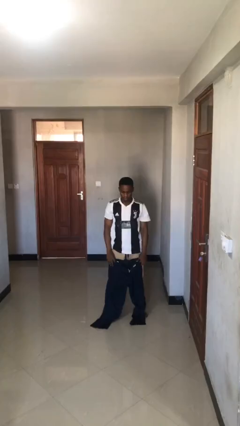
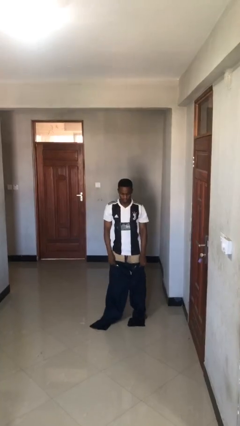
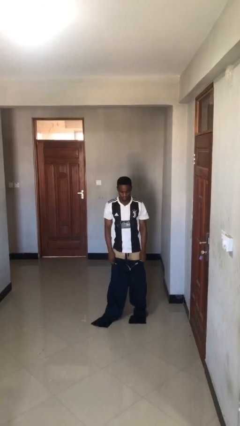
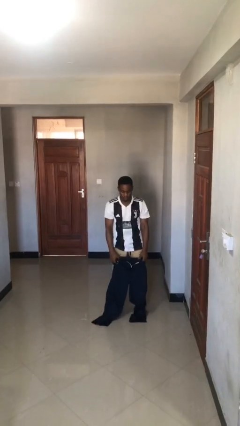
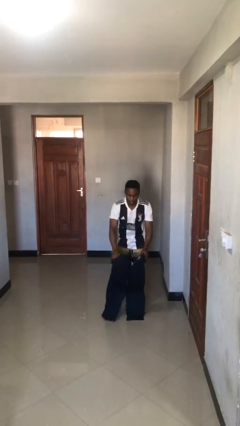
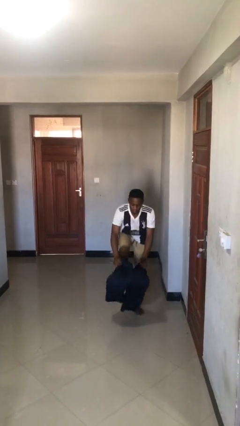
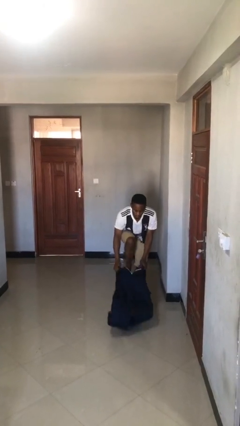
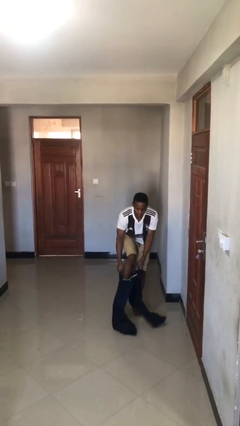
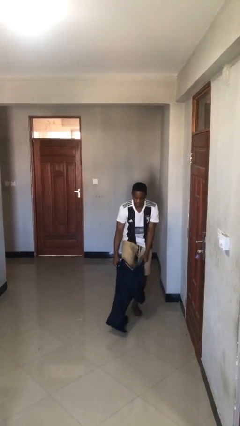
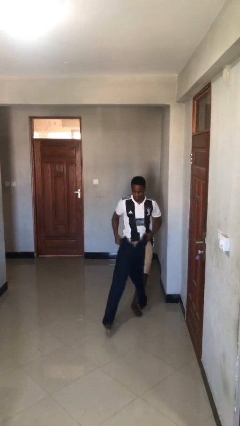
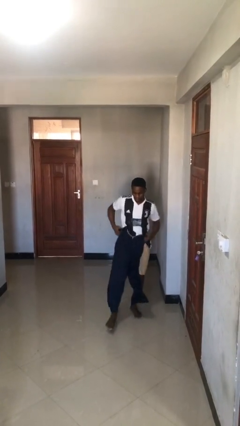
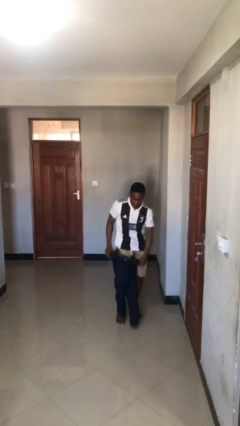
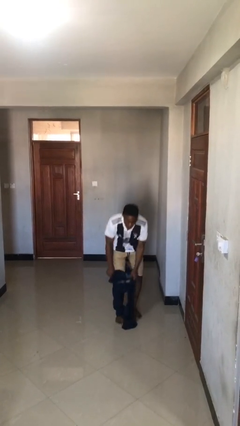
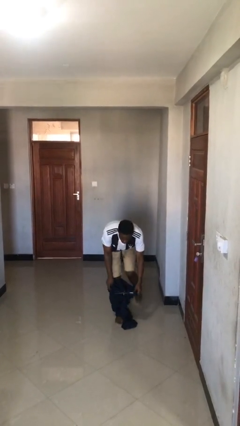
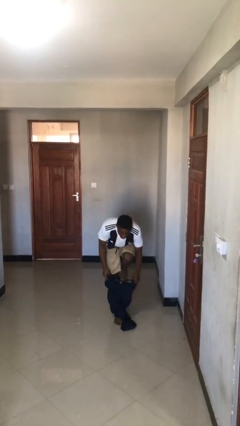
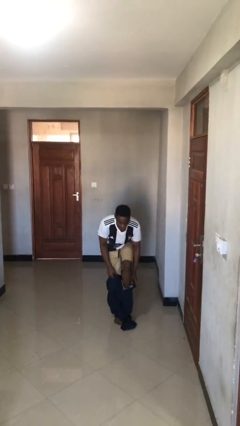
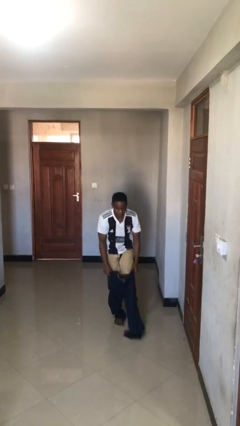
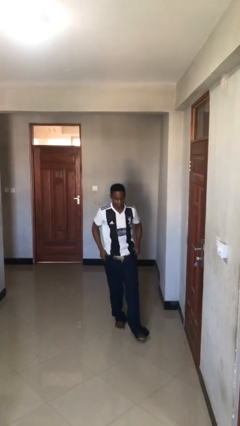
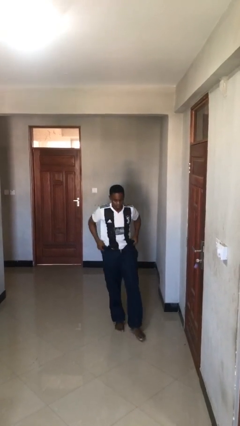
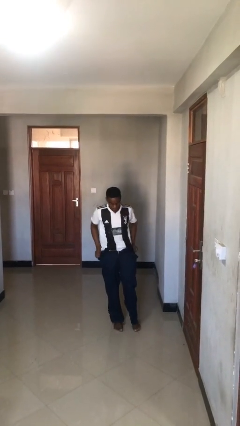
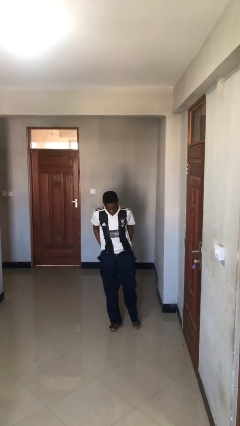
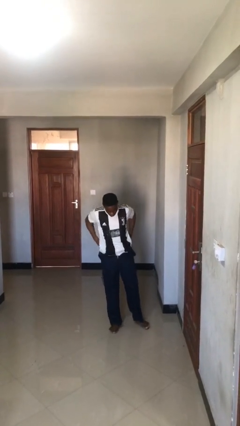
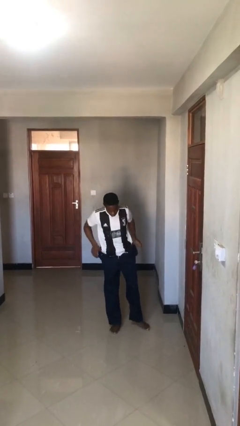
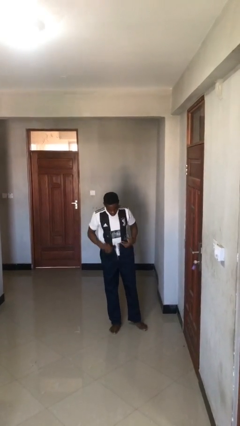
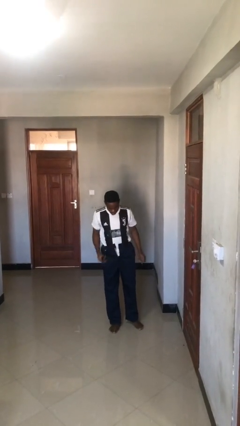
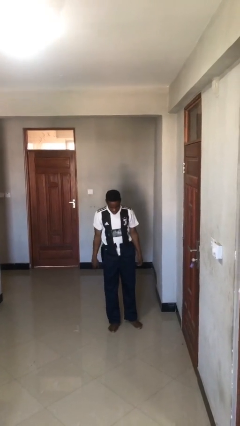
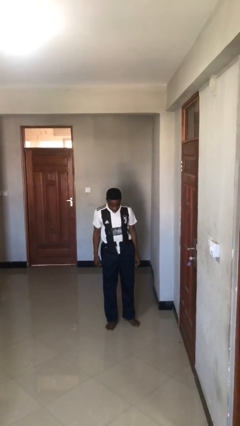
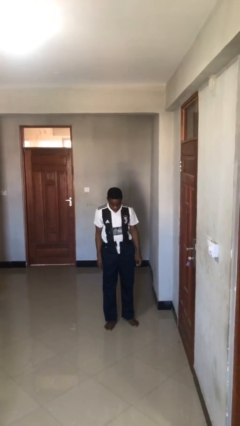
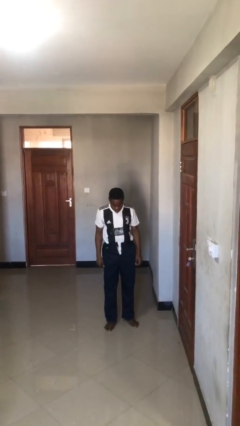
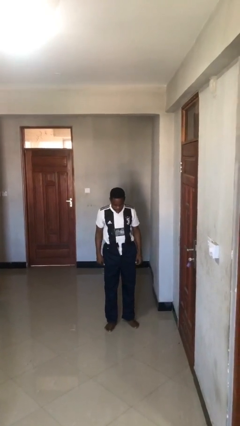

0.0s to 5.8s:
person puts on pants

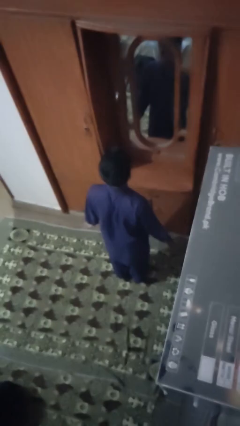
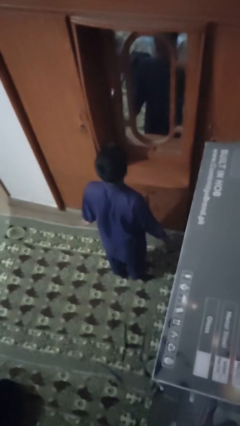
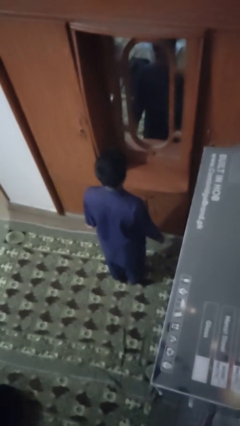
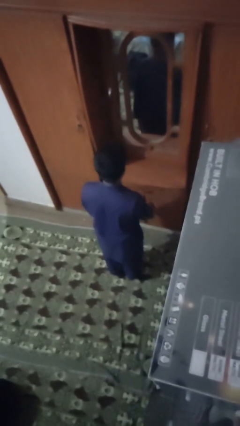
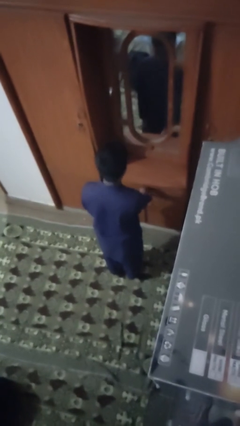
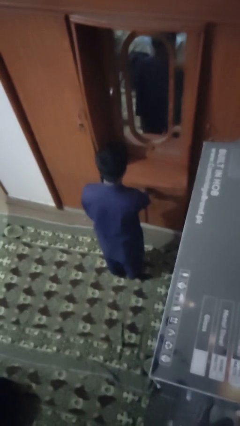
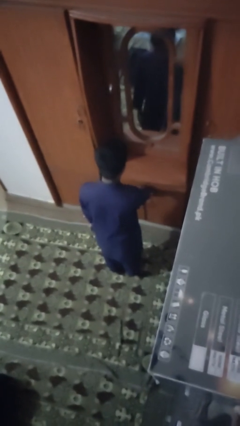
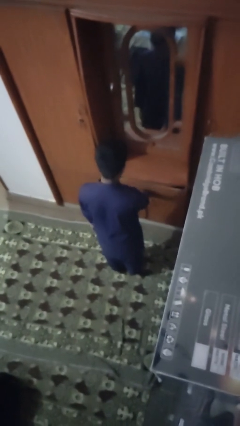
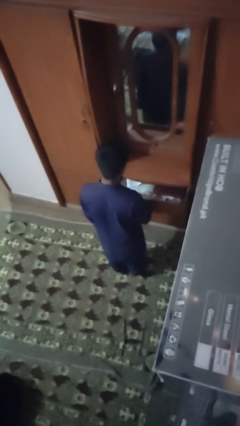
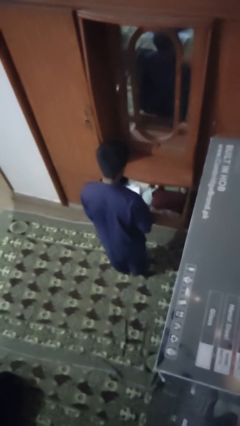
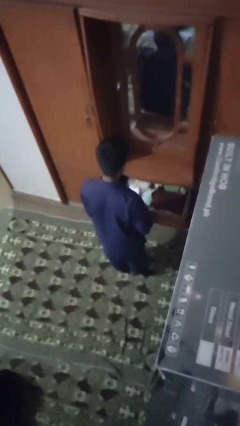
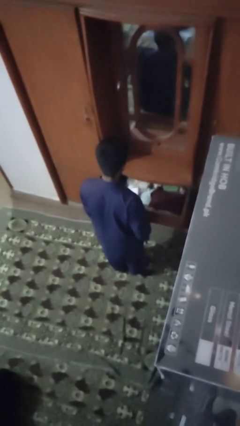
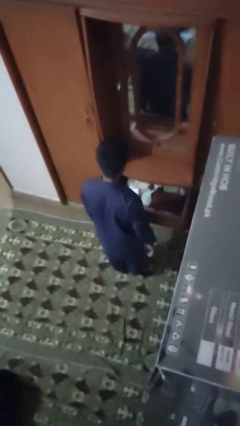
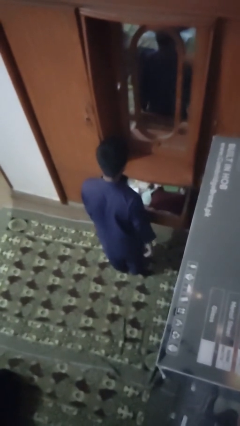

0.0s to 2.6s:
person opens dresser drawer

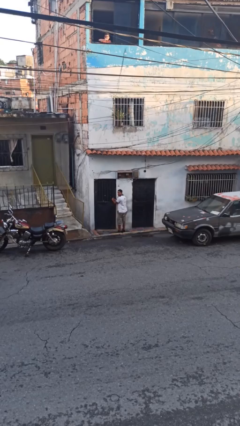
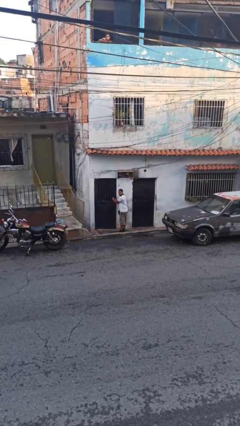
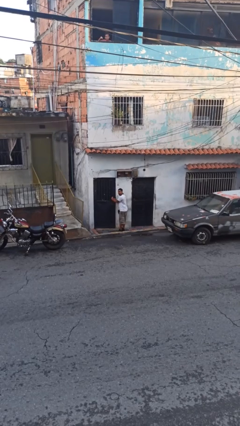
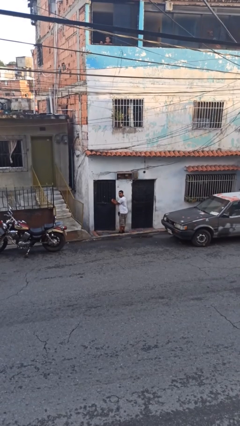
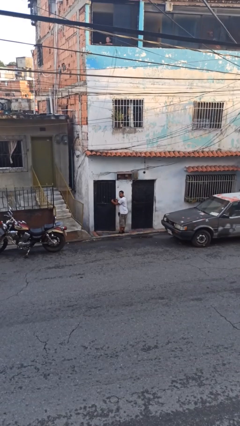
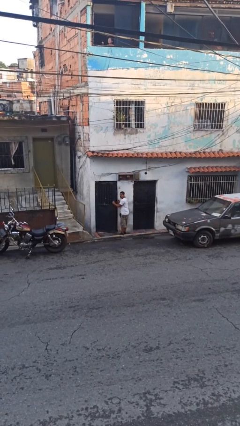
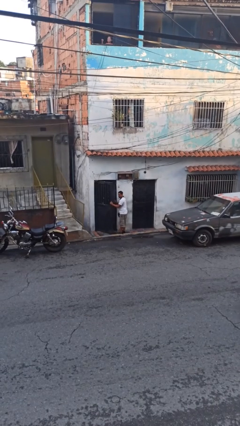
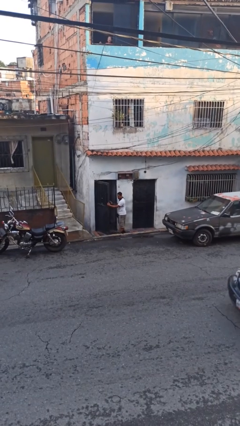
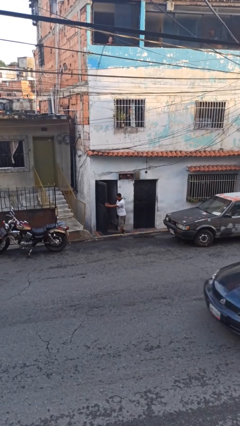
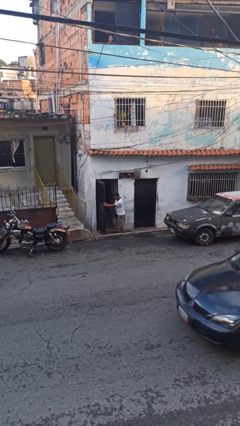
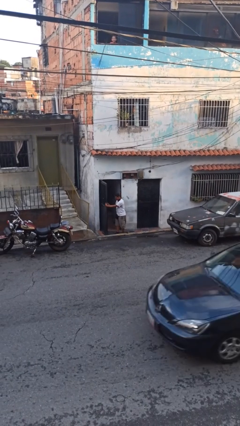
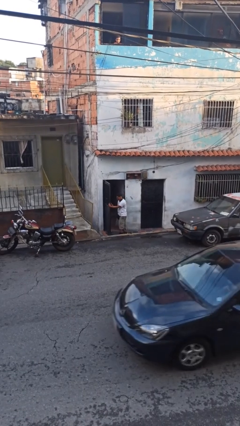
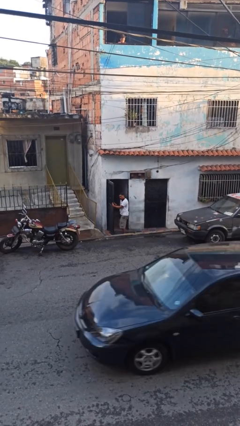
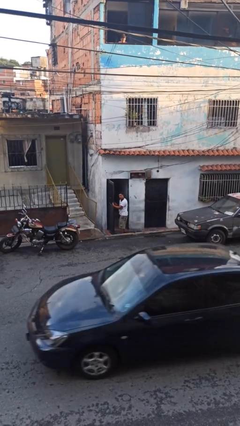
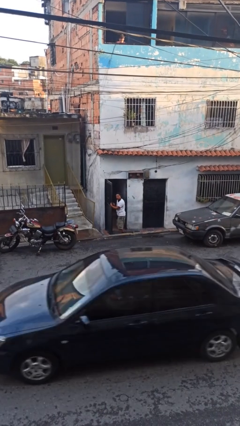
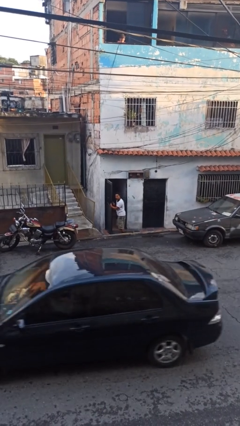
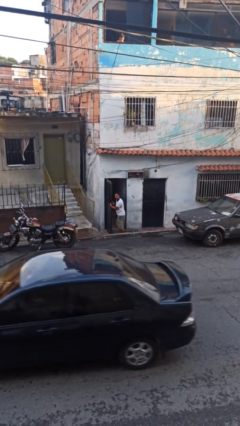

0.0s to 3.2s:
person opens facility door

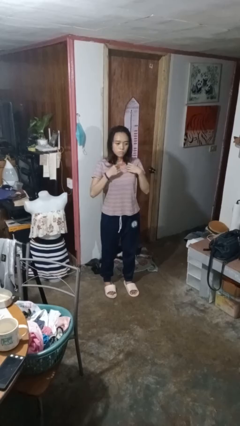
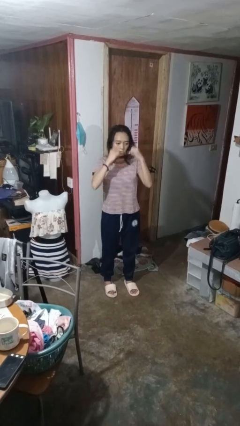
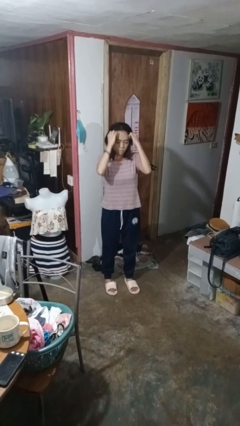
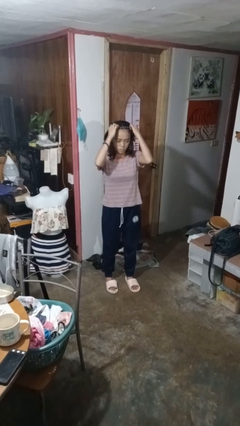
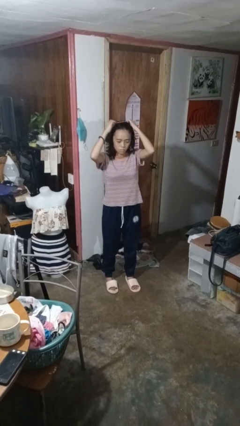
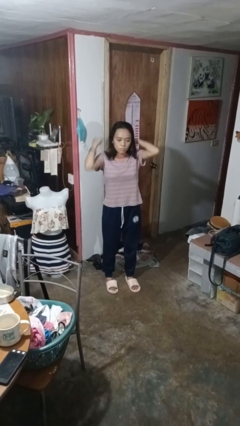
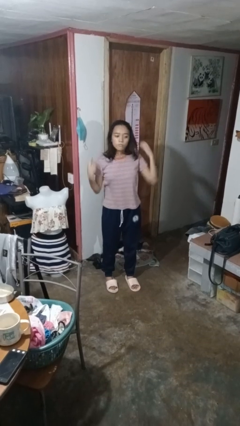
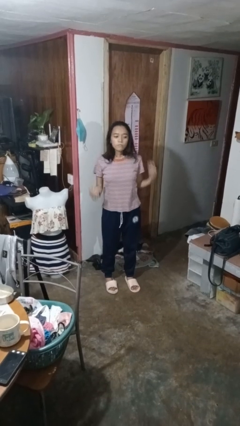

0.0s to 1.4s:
person takes off necklace

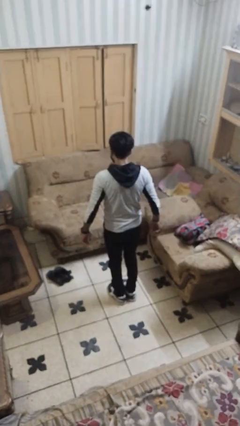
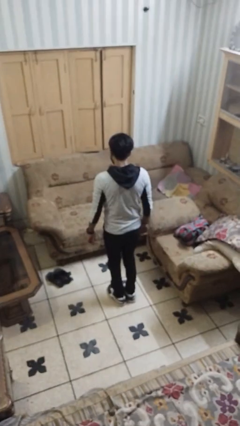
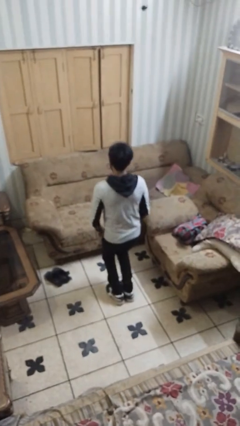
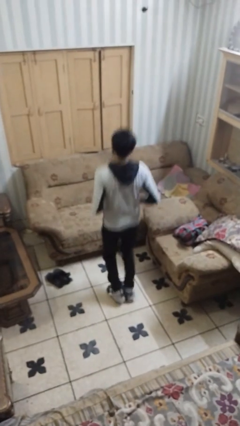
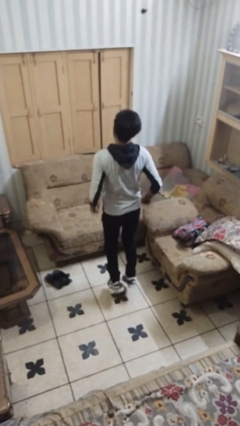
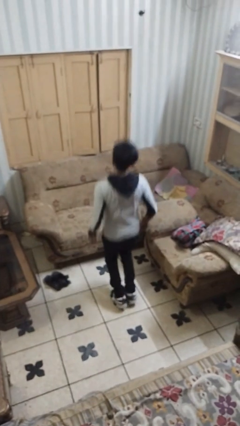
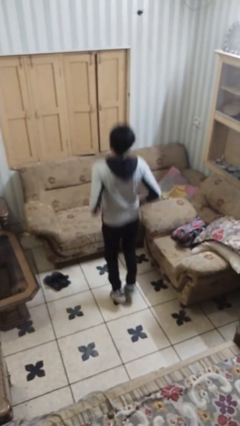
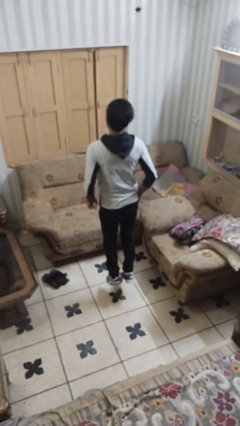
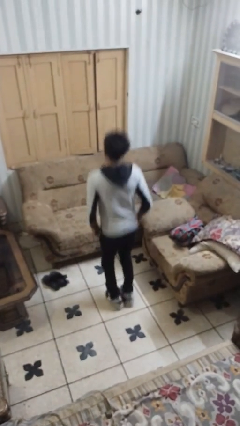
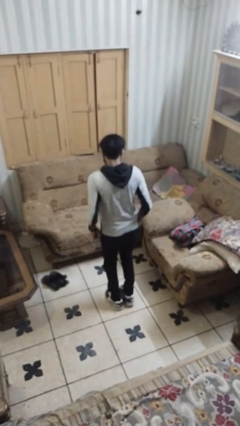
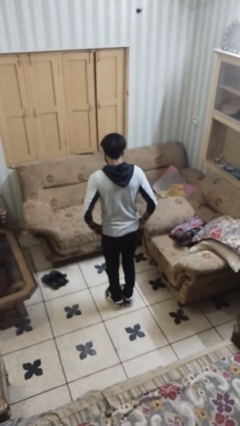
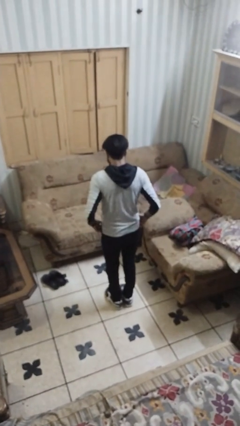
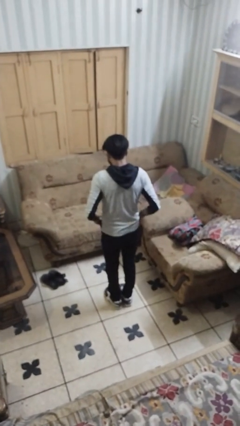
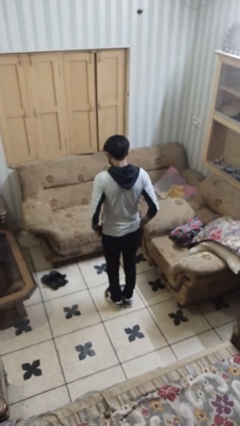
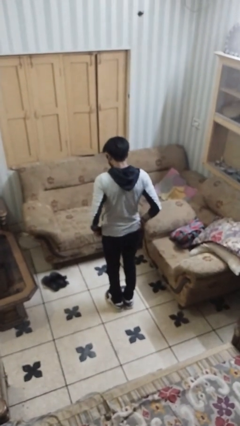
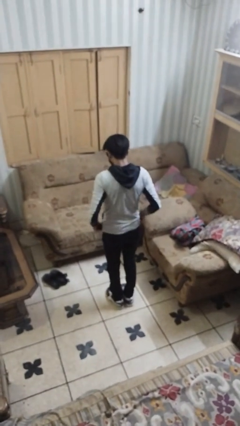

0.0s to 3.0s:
person jumps

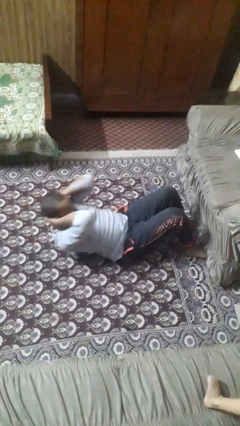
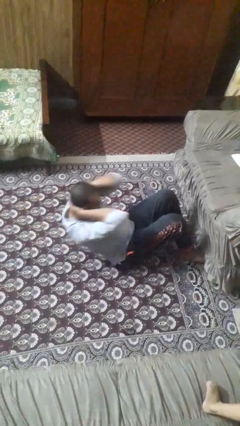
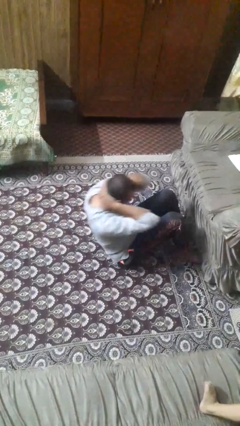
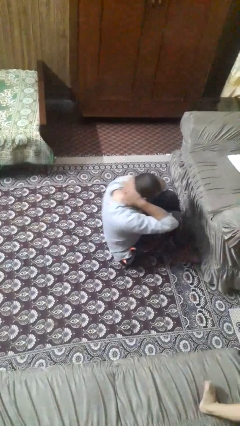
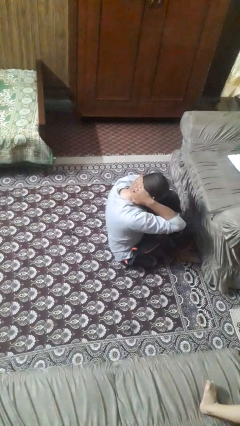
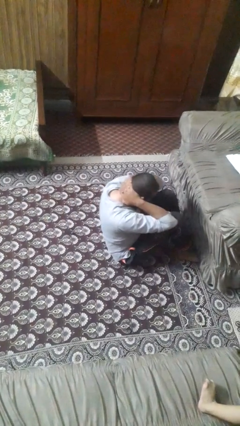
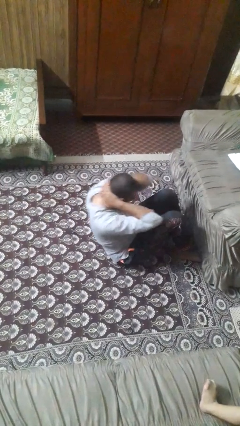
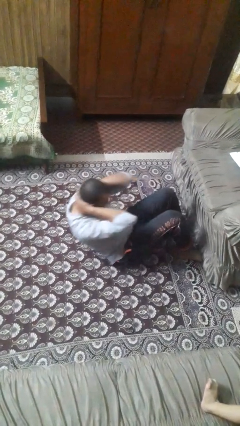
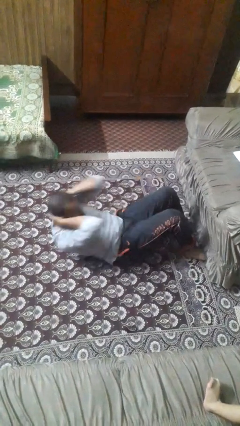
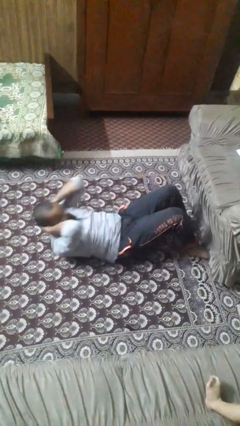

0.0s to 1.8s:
person exercises with situp
